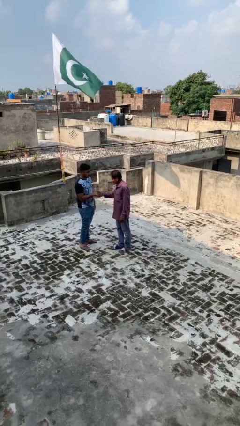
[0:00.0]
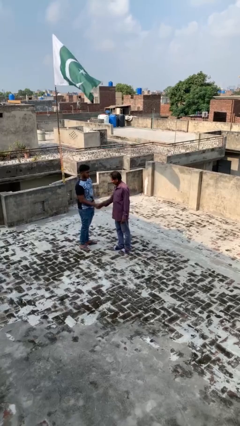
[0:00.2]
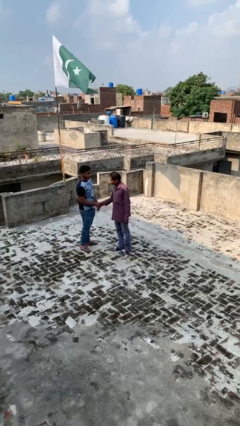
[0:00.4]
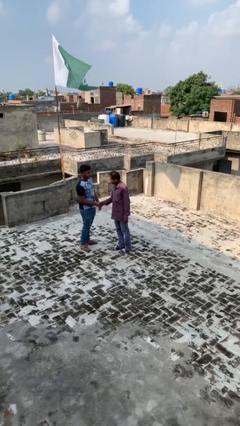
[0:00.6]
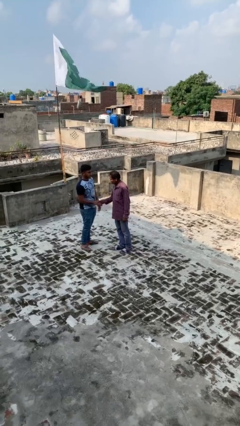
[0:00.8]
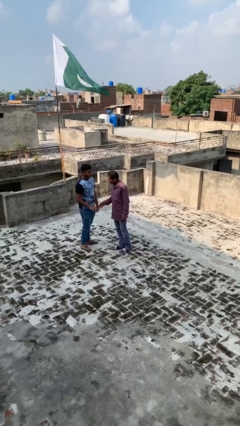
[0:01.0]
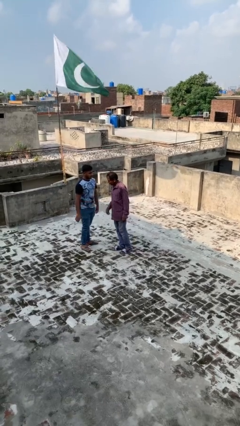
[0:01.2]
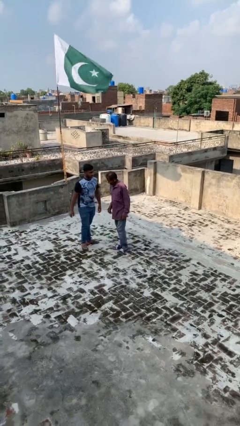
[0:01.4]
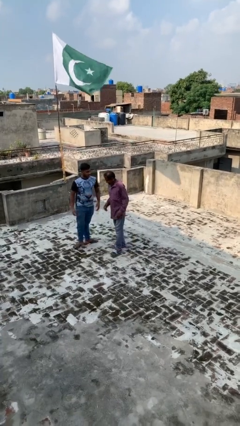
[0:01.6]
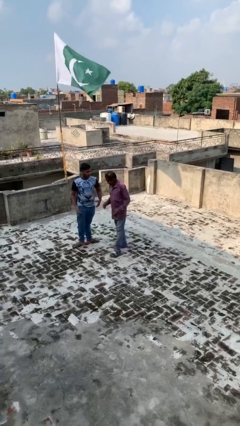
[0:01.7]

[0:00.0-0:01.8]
person shakes hand

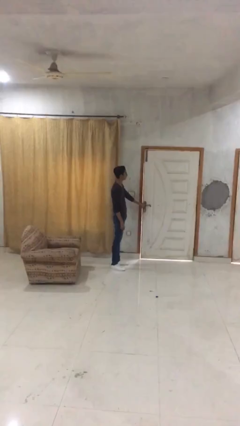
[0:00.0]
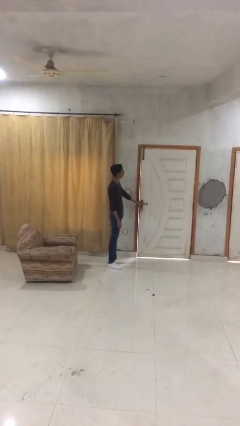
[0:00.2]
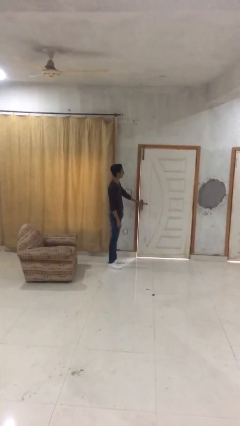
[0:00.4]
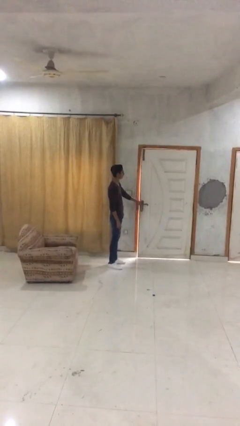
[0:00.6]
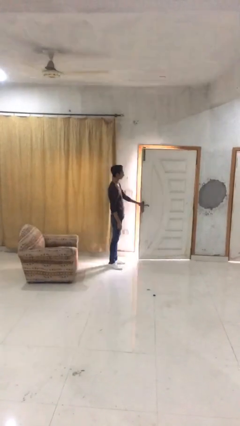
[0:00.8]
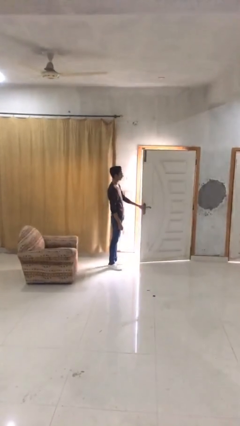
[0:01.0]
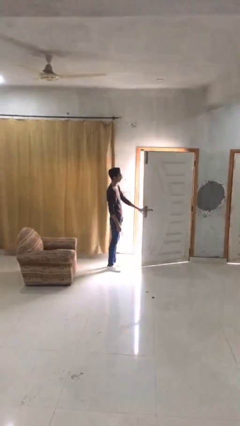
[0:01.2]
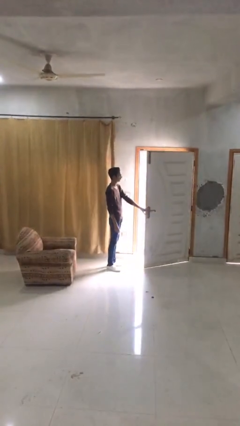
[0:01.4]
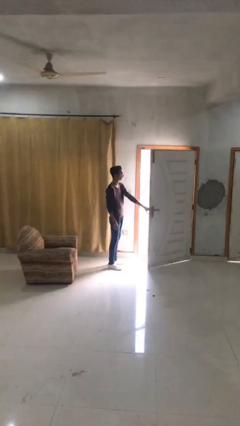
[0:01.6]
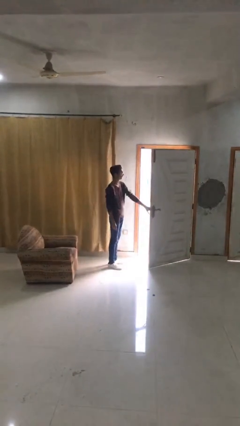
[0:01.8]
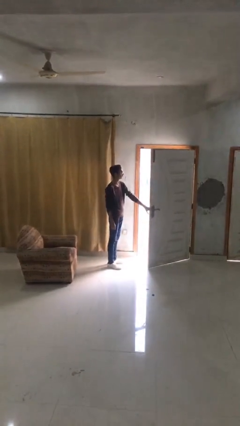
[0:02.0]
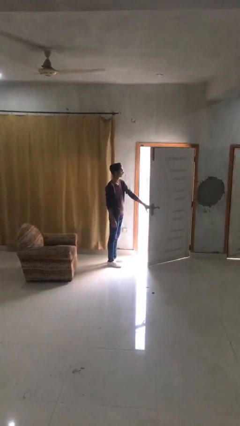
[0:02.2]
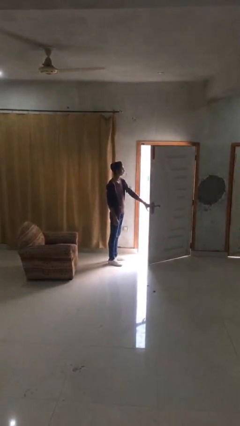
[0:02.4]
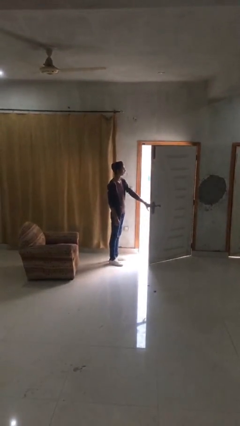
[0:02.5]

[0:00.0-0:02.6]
person opens facility door

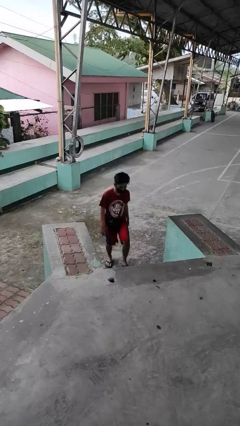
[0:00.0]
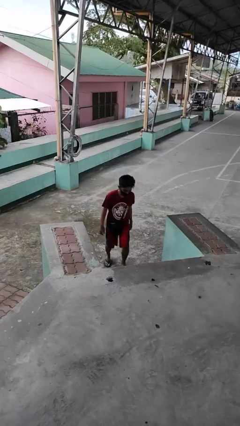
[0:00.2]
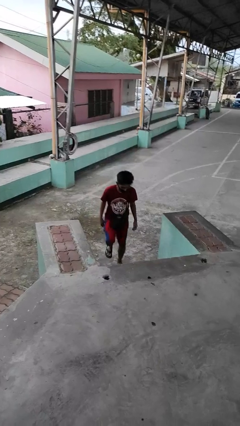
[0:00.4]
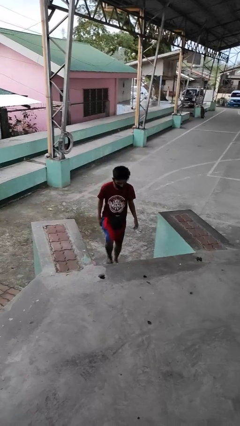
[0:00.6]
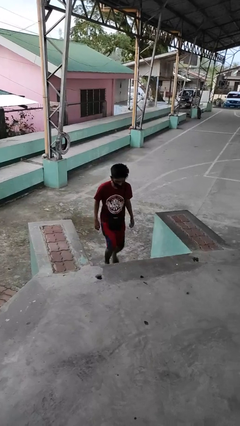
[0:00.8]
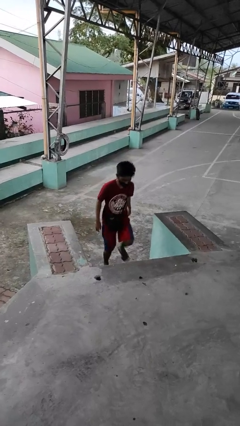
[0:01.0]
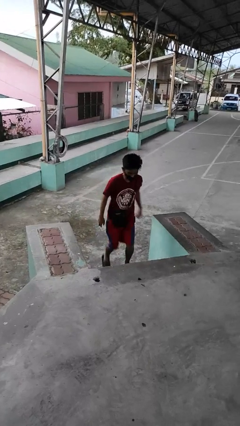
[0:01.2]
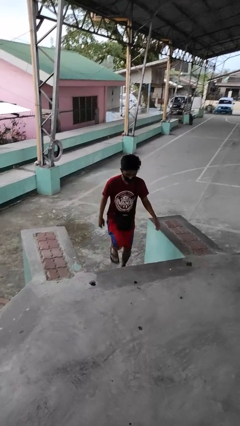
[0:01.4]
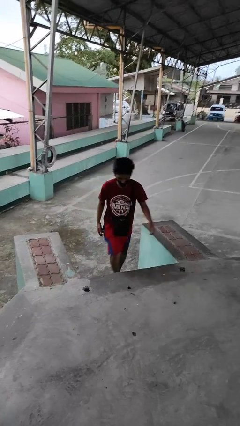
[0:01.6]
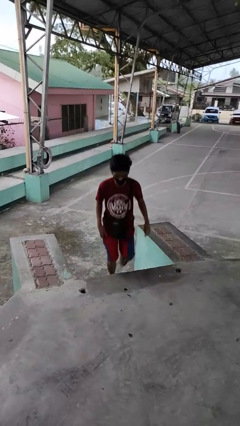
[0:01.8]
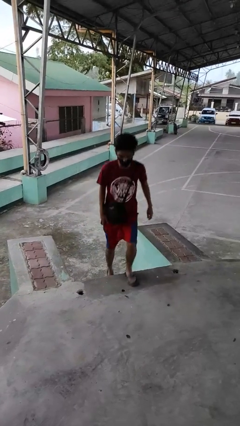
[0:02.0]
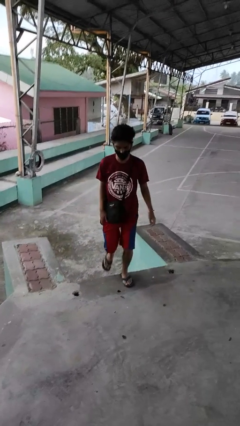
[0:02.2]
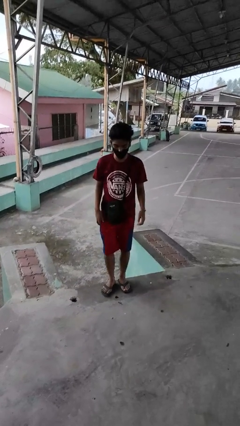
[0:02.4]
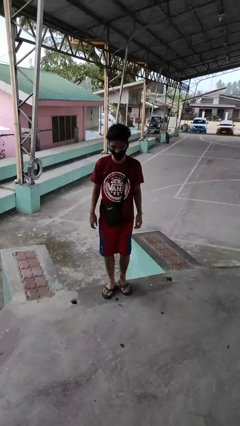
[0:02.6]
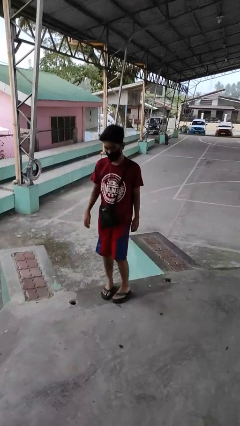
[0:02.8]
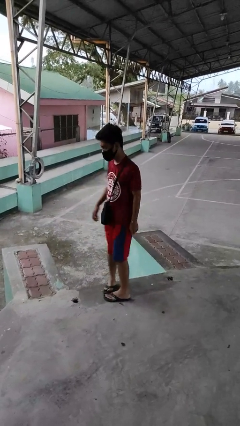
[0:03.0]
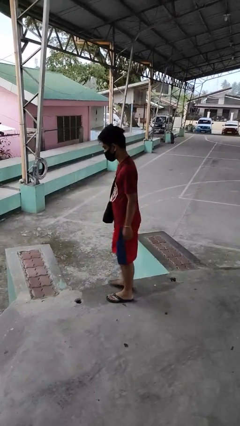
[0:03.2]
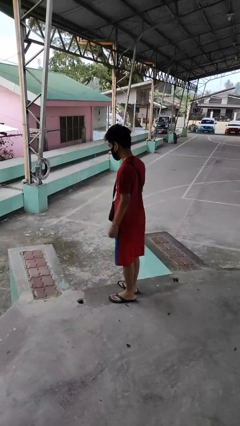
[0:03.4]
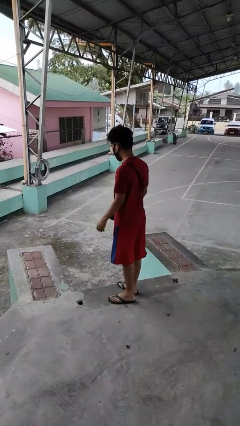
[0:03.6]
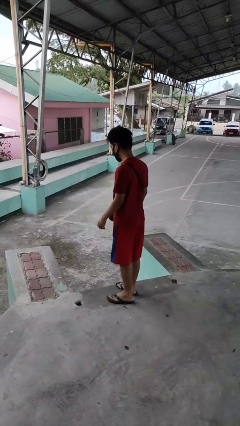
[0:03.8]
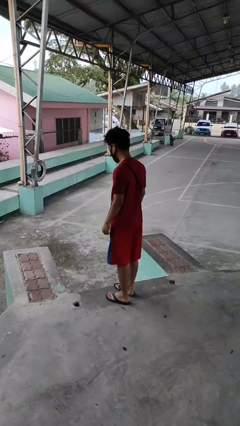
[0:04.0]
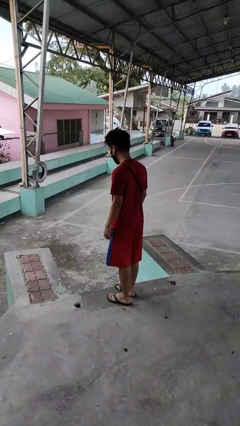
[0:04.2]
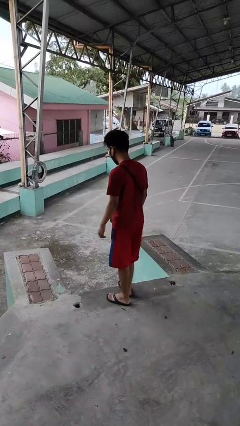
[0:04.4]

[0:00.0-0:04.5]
person climbs up stairs

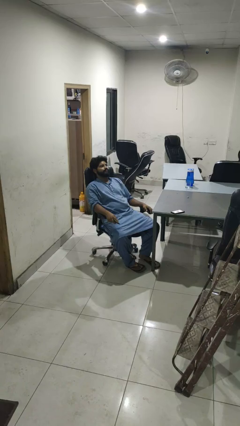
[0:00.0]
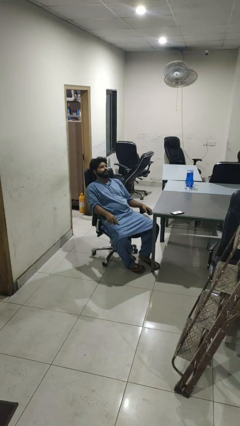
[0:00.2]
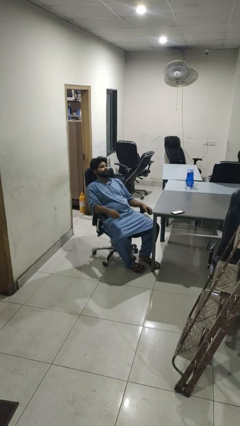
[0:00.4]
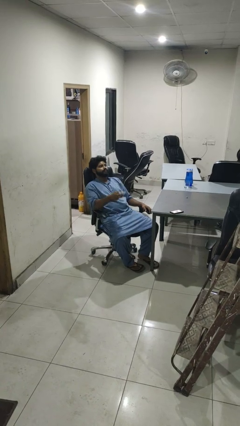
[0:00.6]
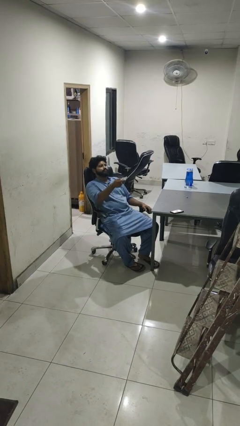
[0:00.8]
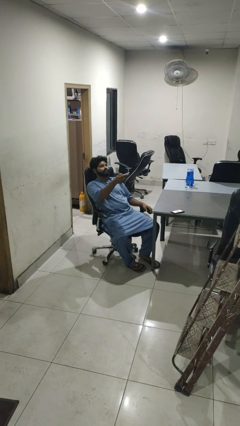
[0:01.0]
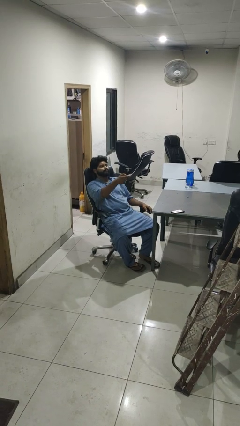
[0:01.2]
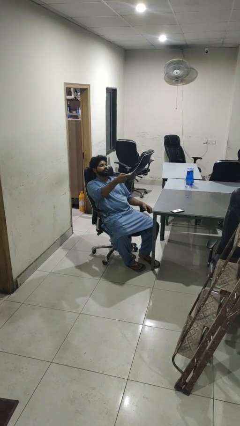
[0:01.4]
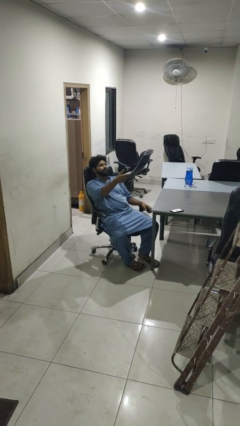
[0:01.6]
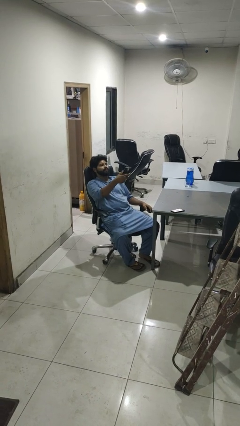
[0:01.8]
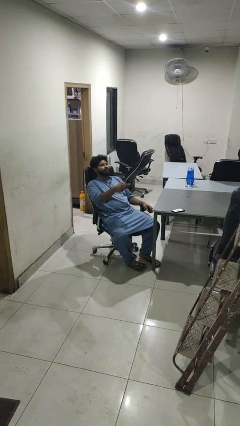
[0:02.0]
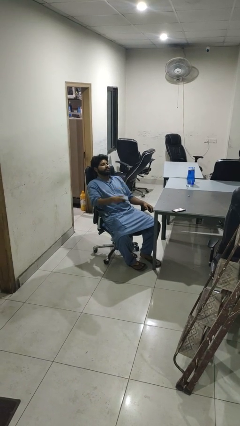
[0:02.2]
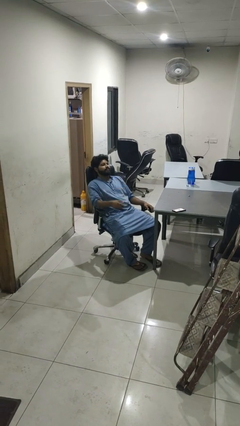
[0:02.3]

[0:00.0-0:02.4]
person uses television remote

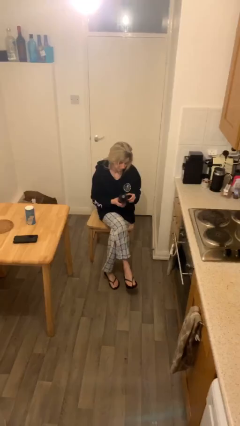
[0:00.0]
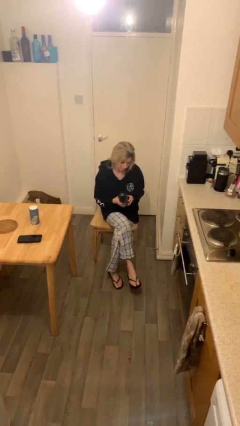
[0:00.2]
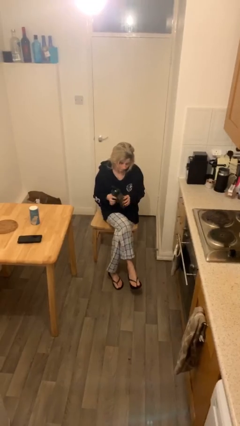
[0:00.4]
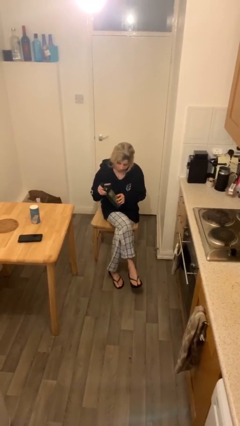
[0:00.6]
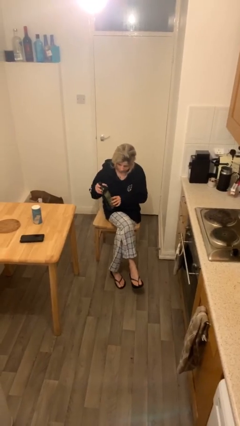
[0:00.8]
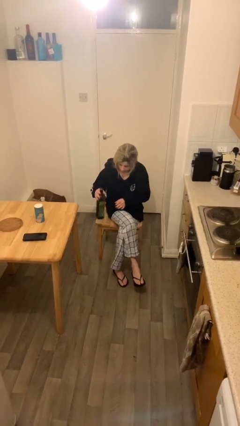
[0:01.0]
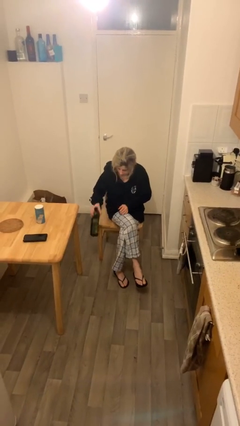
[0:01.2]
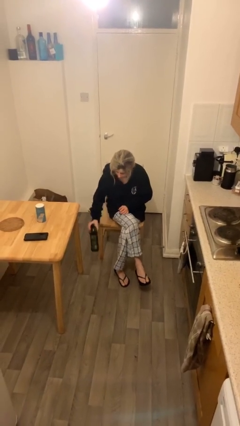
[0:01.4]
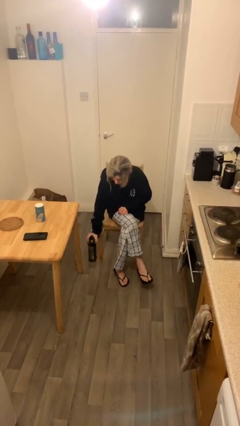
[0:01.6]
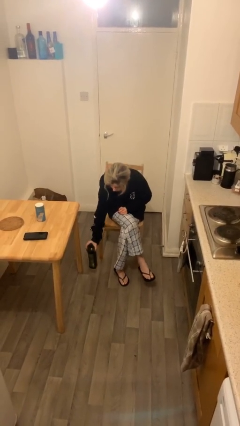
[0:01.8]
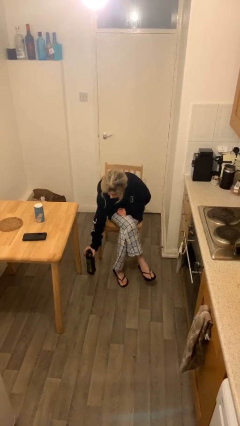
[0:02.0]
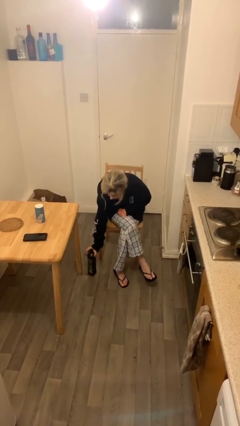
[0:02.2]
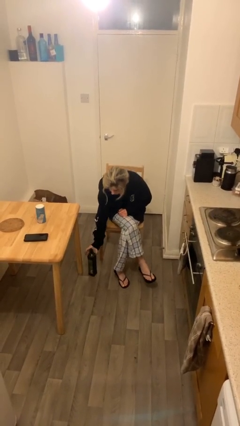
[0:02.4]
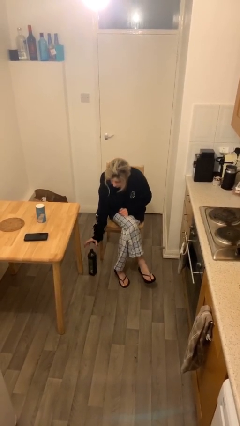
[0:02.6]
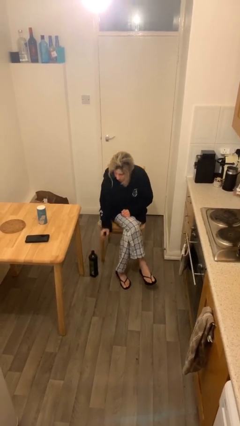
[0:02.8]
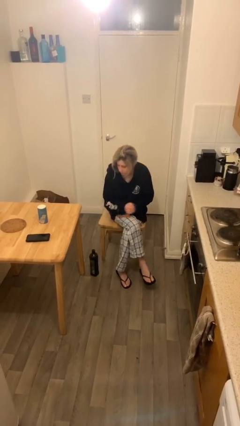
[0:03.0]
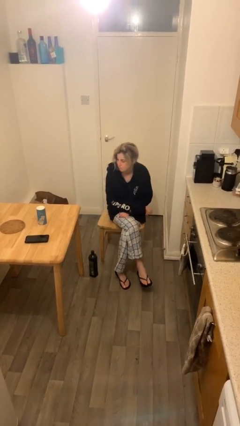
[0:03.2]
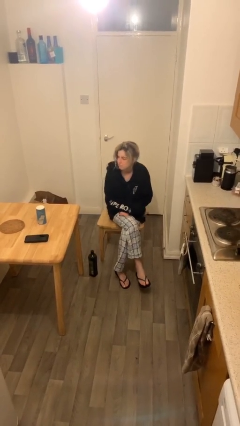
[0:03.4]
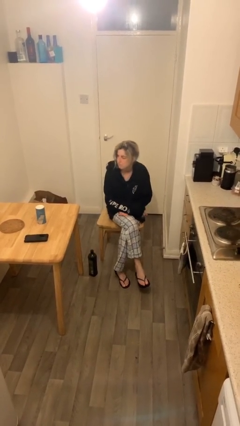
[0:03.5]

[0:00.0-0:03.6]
person puts down object on floor

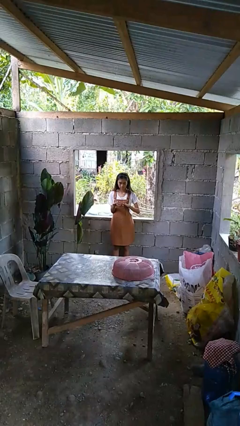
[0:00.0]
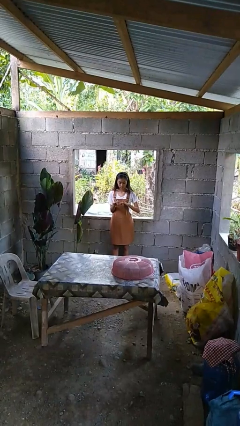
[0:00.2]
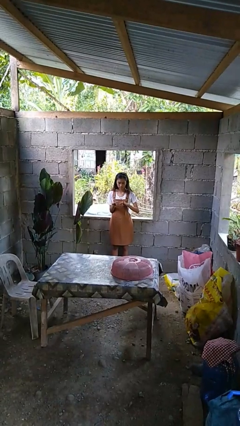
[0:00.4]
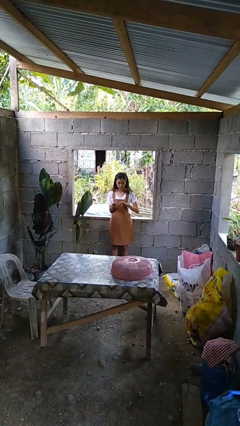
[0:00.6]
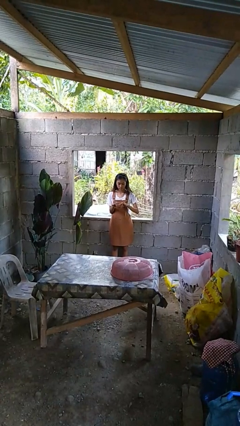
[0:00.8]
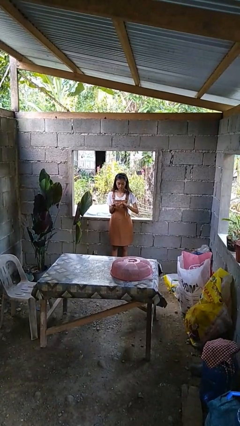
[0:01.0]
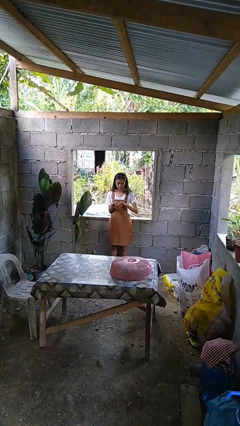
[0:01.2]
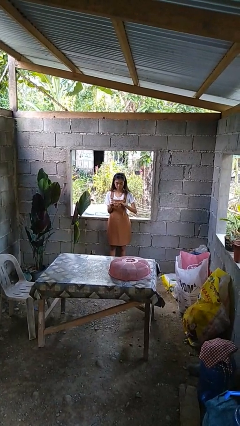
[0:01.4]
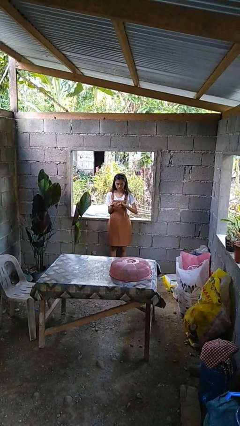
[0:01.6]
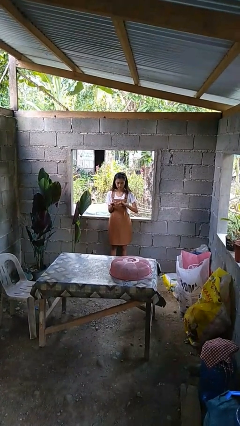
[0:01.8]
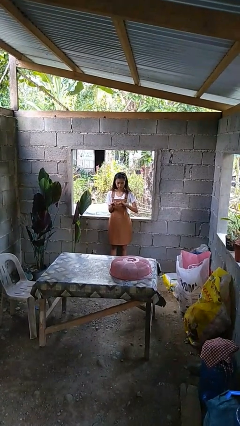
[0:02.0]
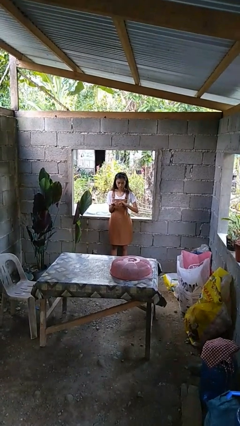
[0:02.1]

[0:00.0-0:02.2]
person clips fingernails
